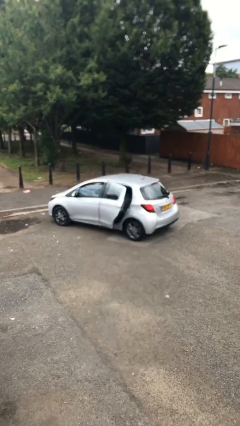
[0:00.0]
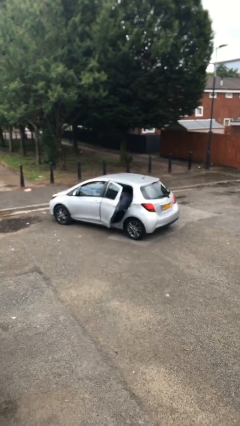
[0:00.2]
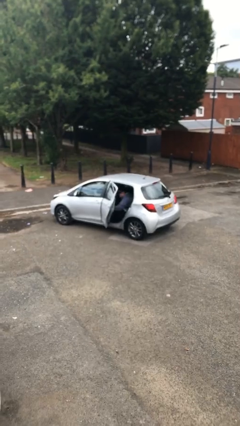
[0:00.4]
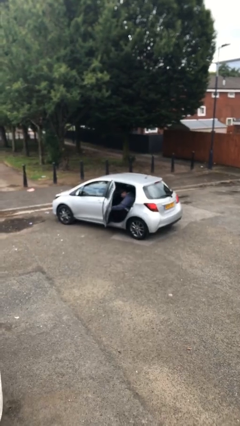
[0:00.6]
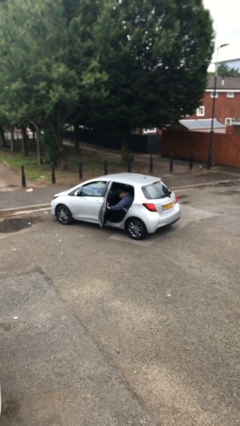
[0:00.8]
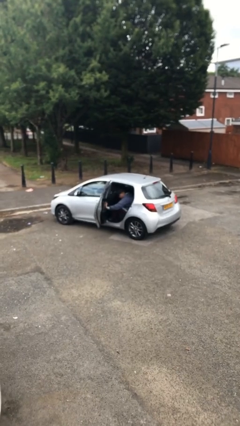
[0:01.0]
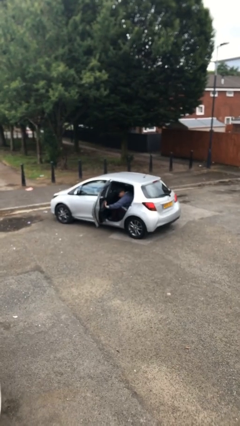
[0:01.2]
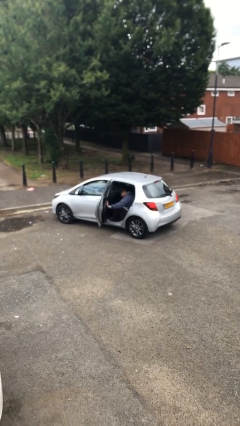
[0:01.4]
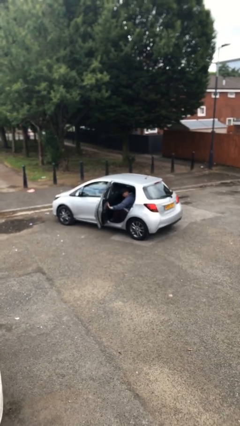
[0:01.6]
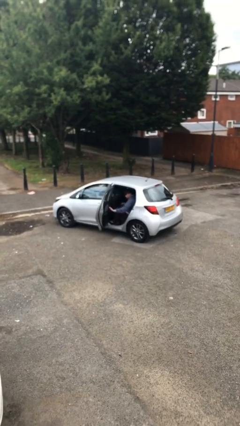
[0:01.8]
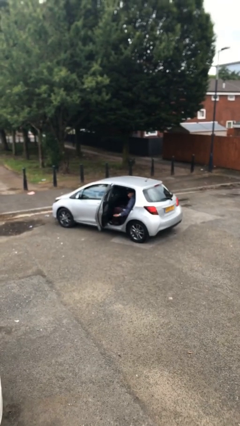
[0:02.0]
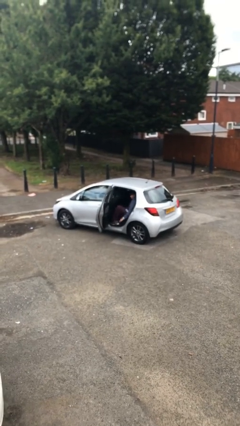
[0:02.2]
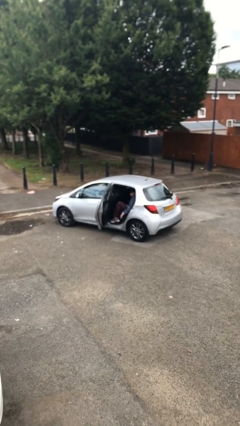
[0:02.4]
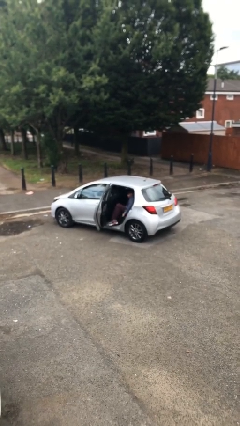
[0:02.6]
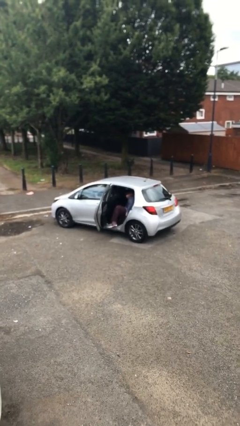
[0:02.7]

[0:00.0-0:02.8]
person opens car door

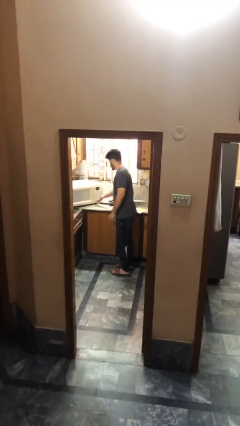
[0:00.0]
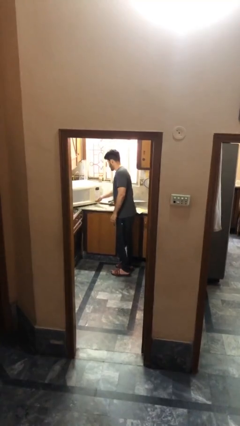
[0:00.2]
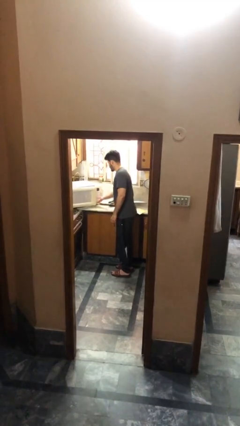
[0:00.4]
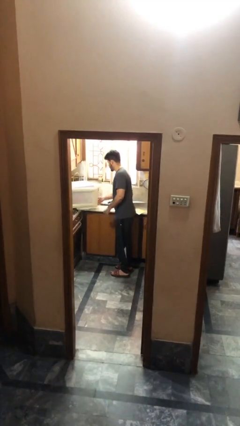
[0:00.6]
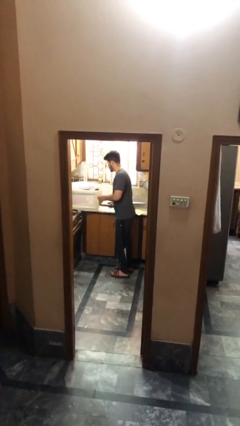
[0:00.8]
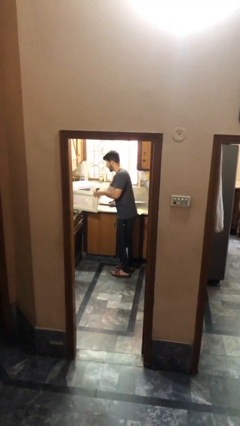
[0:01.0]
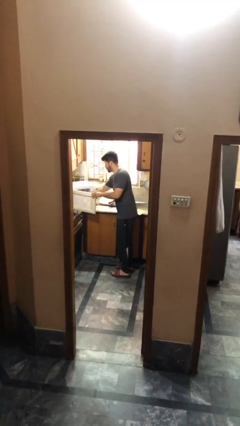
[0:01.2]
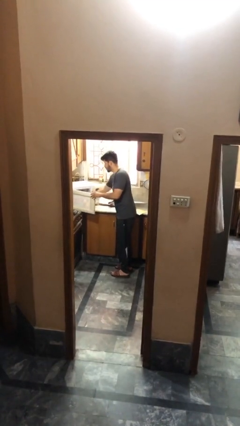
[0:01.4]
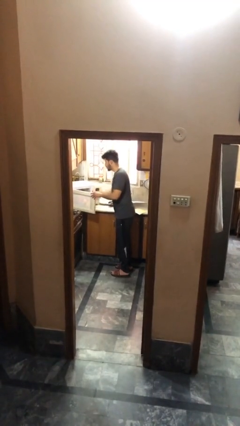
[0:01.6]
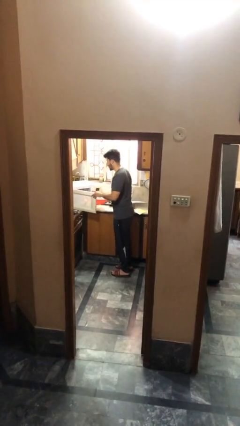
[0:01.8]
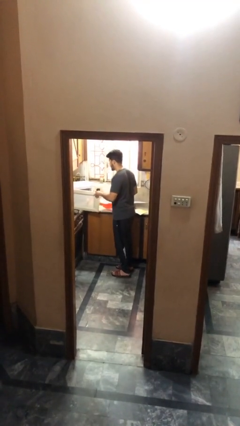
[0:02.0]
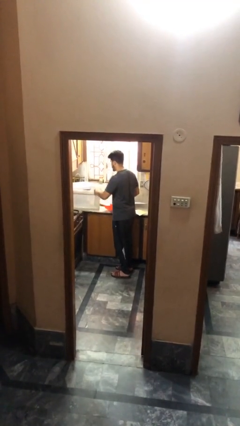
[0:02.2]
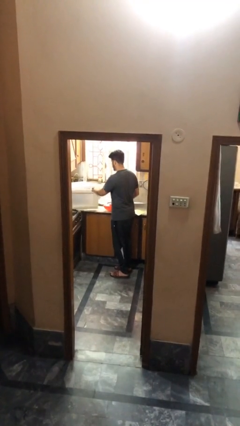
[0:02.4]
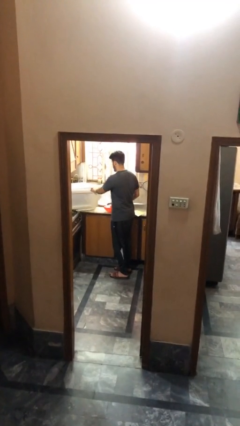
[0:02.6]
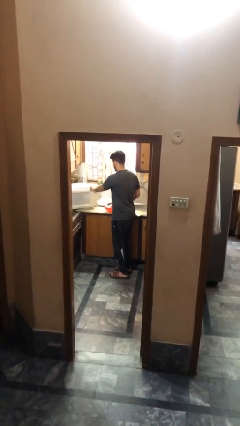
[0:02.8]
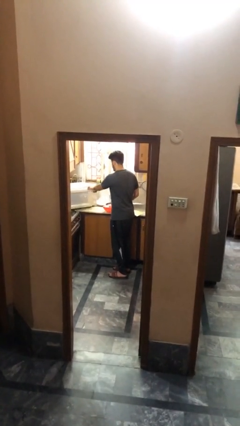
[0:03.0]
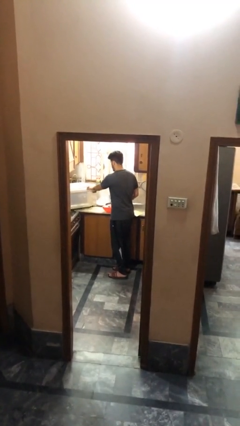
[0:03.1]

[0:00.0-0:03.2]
person takes object from microwave

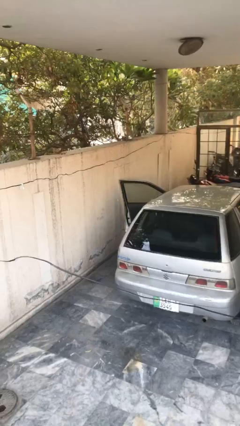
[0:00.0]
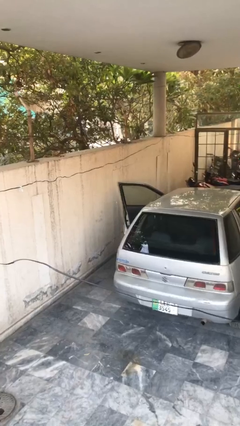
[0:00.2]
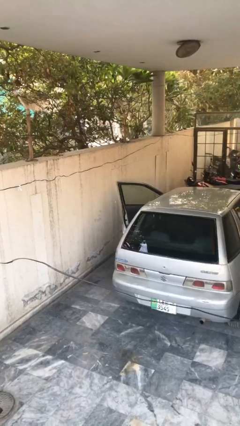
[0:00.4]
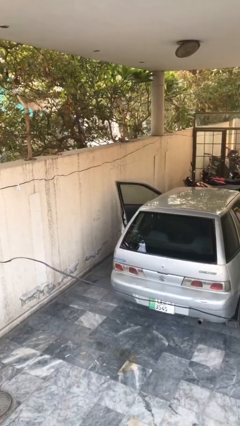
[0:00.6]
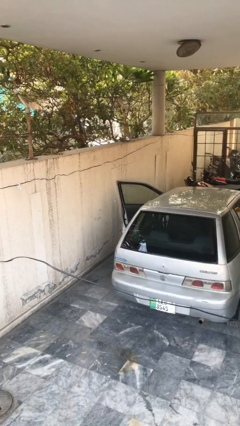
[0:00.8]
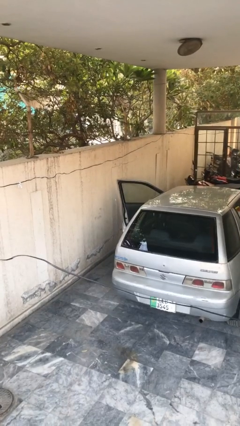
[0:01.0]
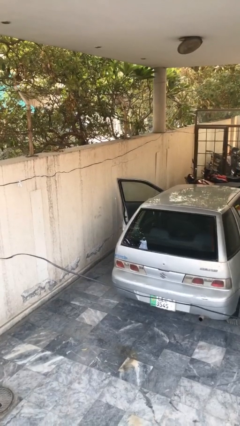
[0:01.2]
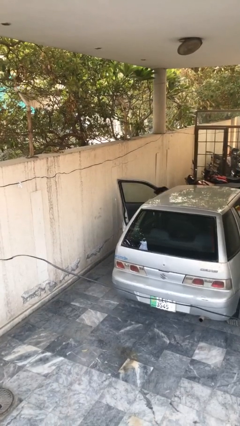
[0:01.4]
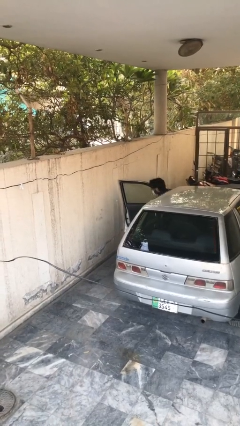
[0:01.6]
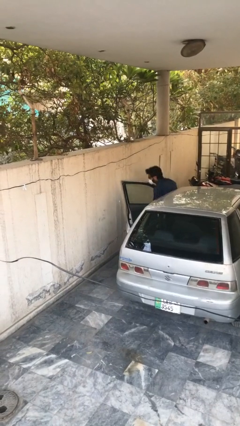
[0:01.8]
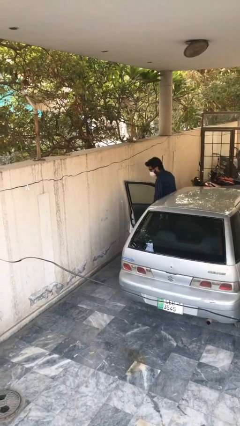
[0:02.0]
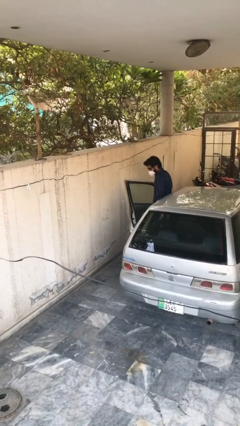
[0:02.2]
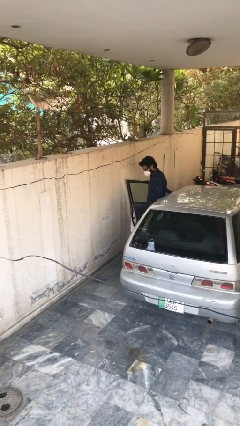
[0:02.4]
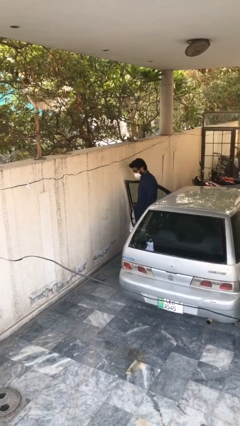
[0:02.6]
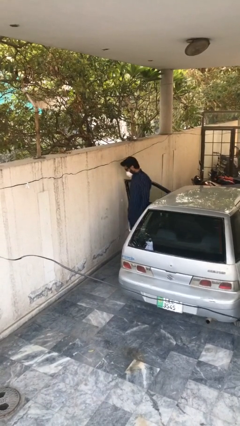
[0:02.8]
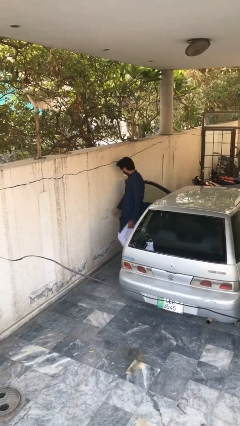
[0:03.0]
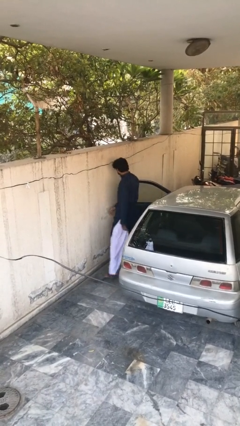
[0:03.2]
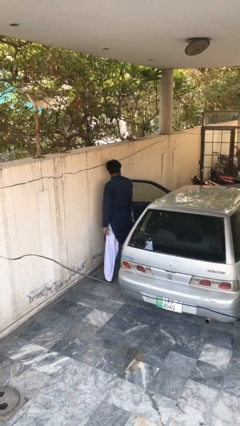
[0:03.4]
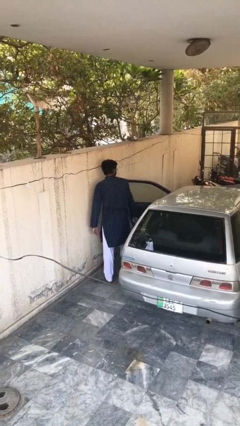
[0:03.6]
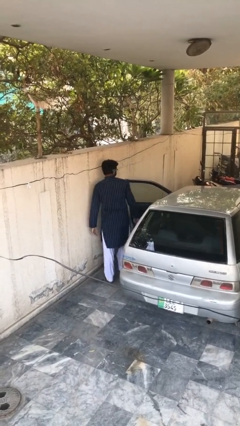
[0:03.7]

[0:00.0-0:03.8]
person exits car

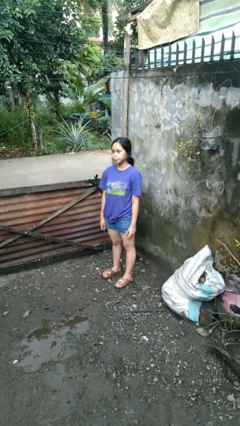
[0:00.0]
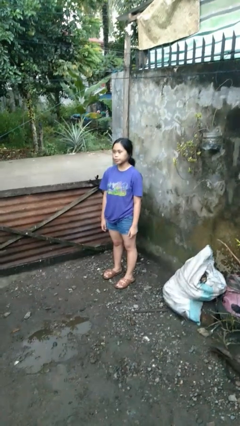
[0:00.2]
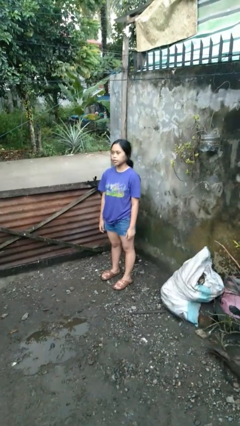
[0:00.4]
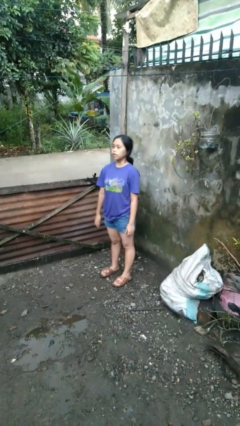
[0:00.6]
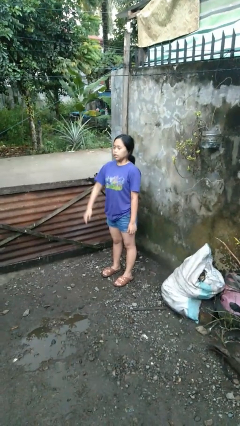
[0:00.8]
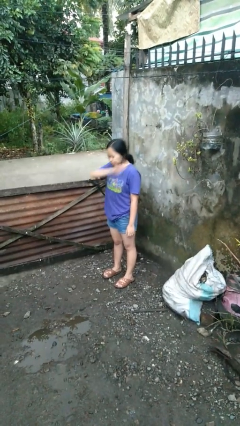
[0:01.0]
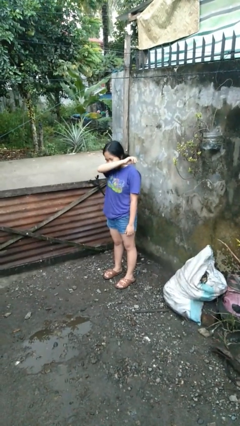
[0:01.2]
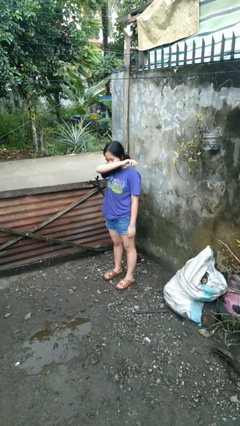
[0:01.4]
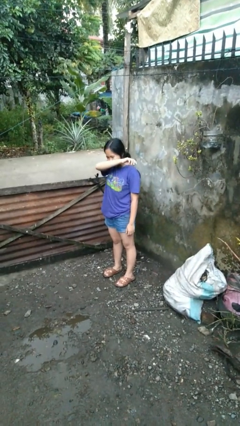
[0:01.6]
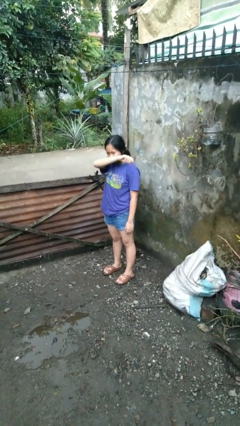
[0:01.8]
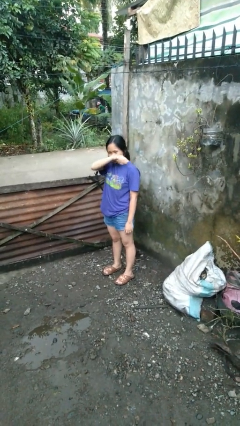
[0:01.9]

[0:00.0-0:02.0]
person sneezes into arm

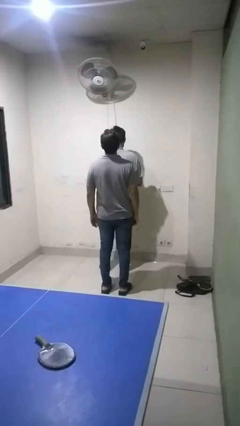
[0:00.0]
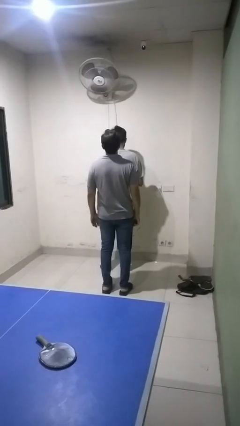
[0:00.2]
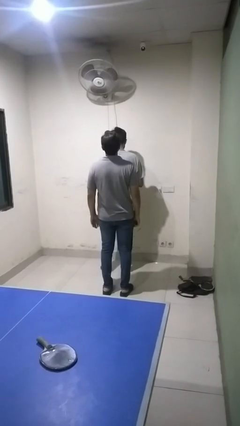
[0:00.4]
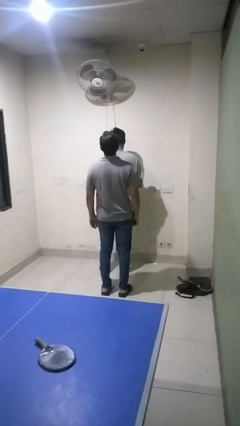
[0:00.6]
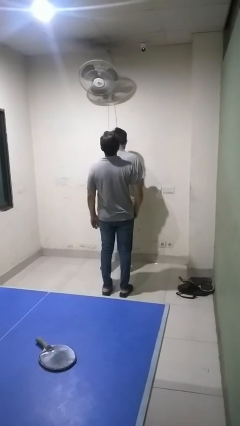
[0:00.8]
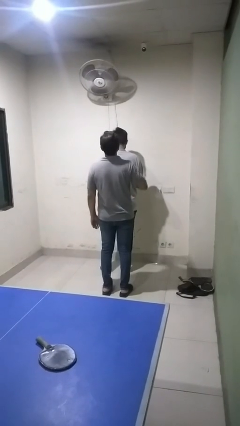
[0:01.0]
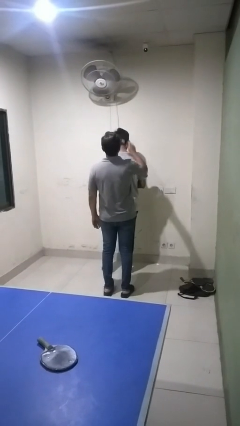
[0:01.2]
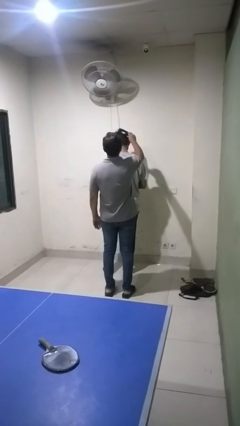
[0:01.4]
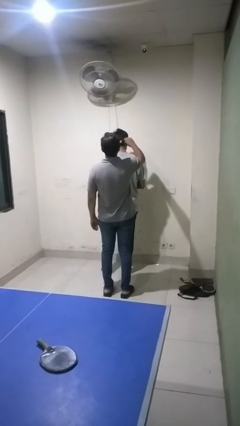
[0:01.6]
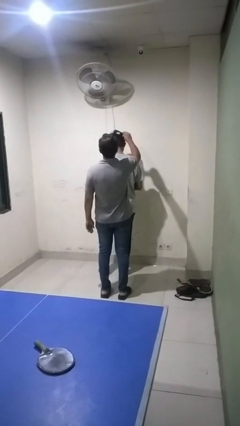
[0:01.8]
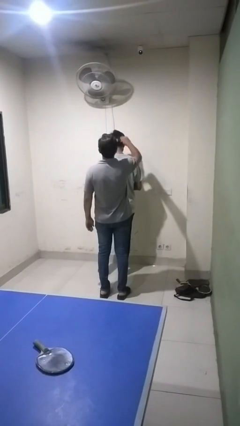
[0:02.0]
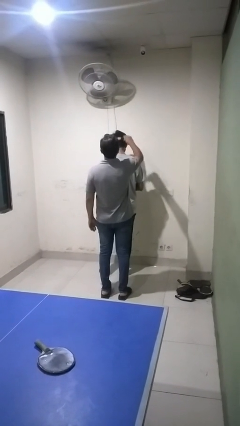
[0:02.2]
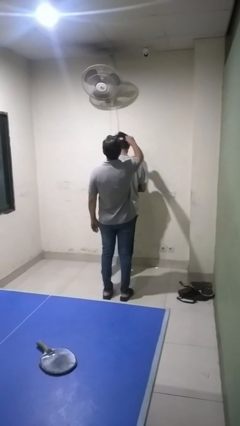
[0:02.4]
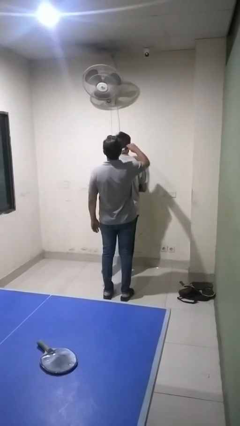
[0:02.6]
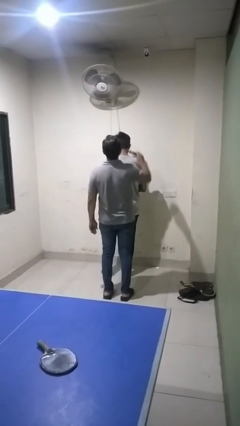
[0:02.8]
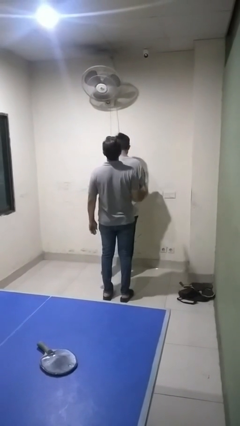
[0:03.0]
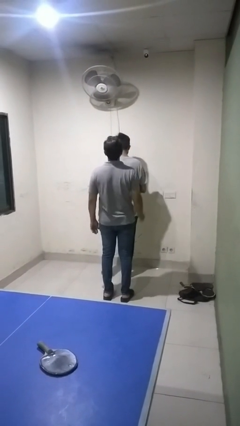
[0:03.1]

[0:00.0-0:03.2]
person brushes hair of person

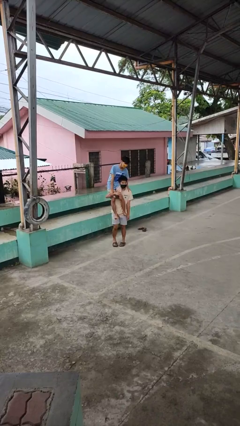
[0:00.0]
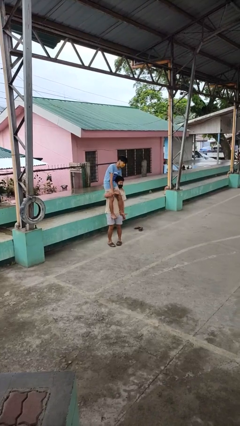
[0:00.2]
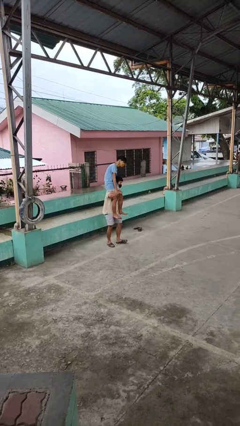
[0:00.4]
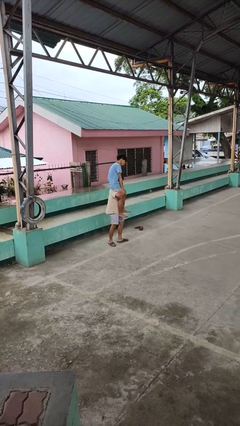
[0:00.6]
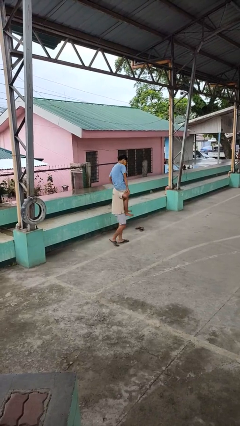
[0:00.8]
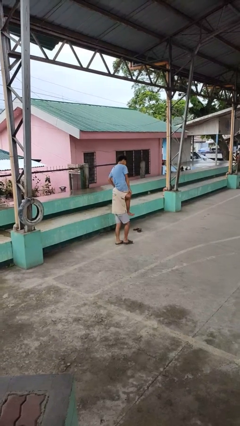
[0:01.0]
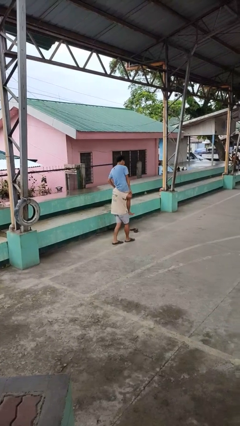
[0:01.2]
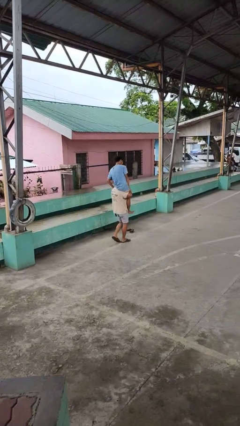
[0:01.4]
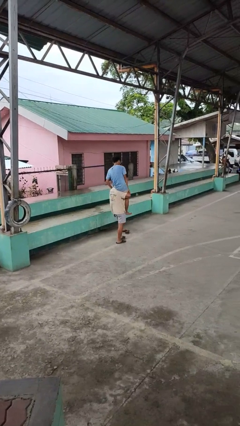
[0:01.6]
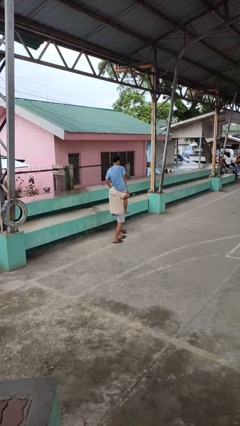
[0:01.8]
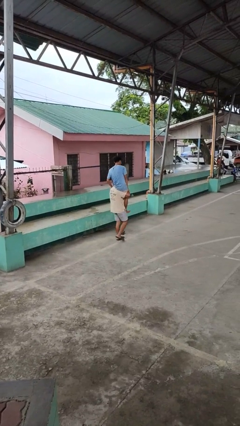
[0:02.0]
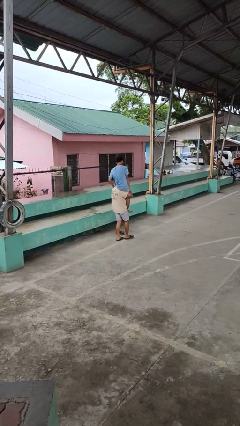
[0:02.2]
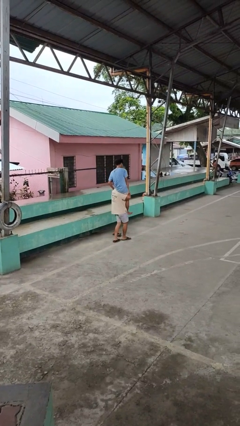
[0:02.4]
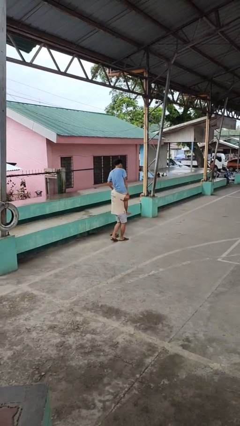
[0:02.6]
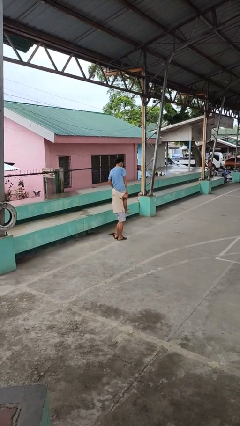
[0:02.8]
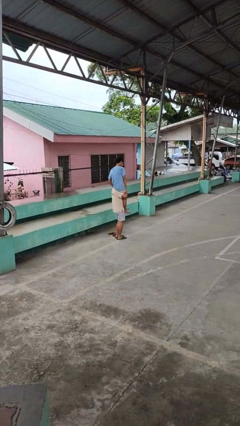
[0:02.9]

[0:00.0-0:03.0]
person carries person on shoulders
